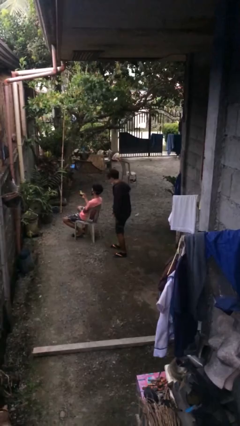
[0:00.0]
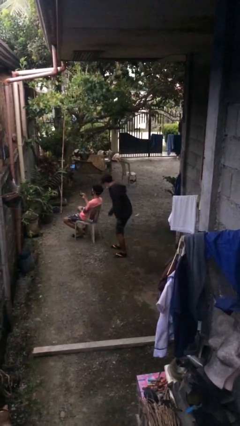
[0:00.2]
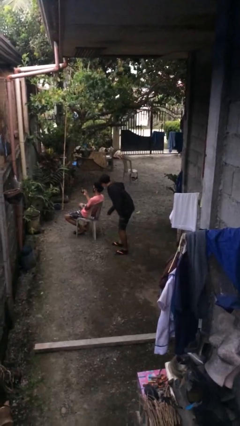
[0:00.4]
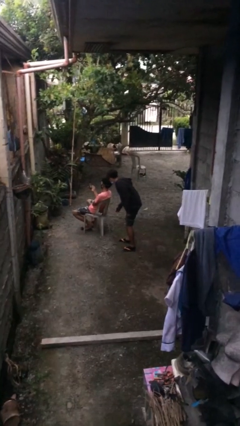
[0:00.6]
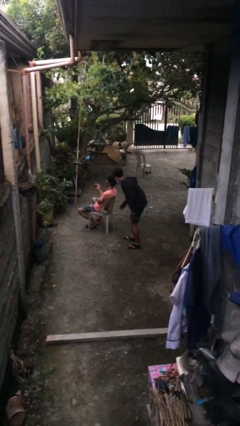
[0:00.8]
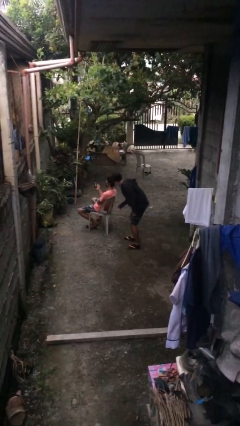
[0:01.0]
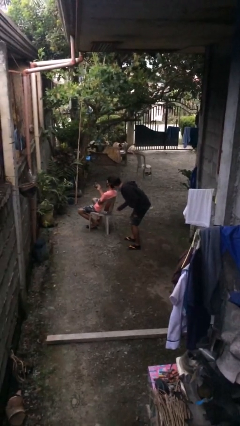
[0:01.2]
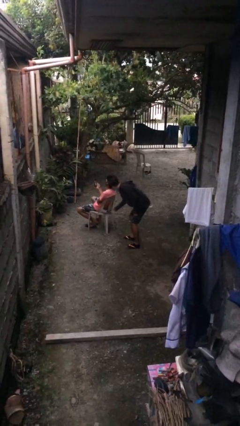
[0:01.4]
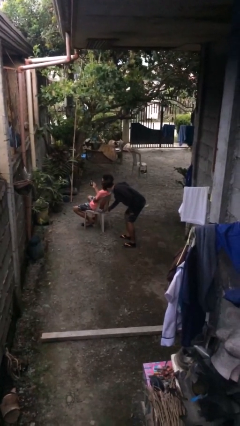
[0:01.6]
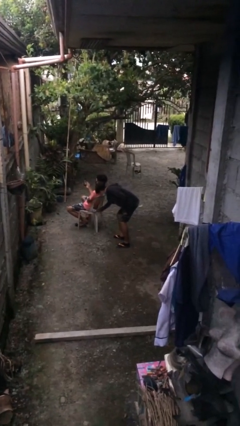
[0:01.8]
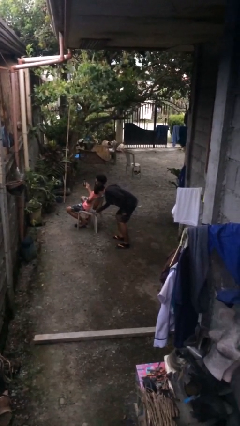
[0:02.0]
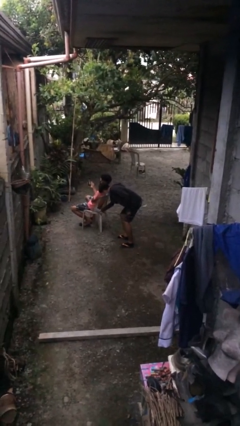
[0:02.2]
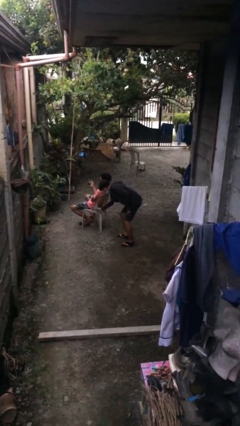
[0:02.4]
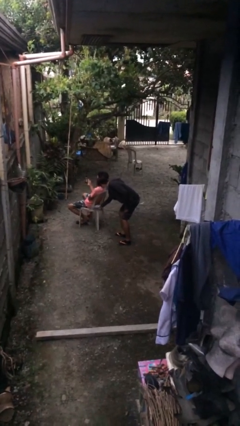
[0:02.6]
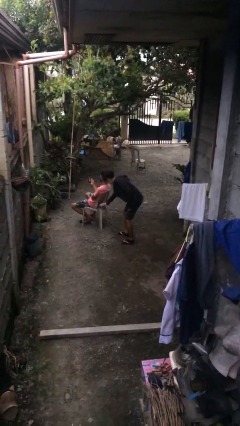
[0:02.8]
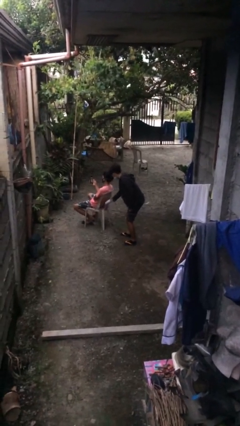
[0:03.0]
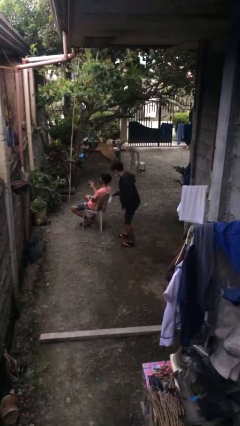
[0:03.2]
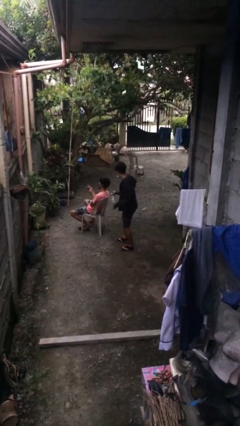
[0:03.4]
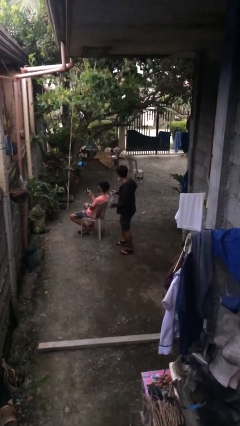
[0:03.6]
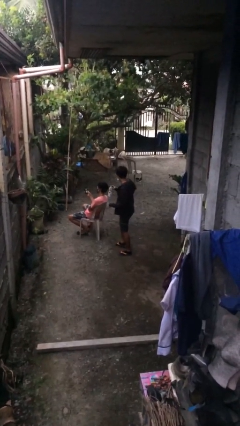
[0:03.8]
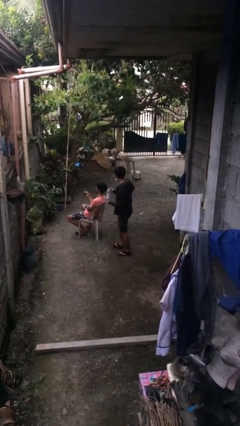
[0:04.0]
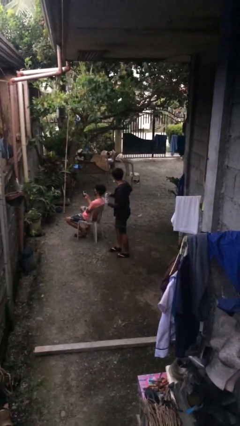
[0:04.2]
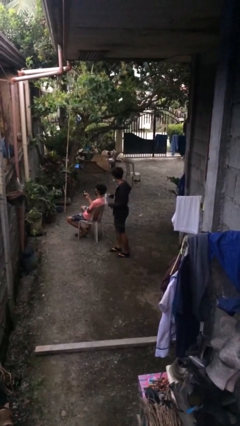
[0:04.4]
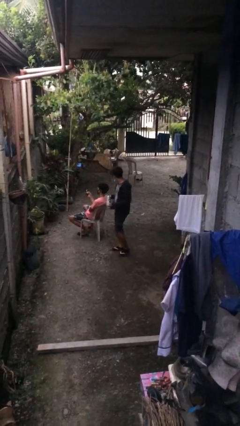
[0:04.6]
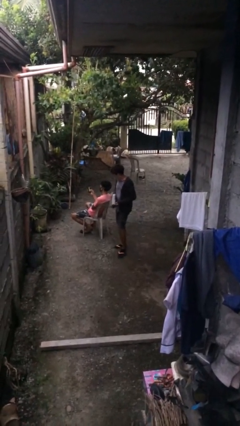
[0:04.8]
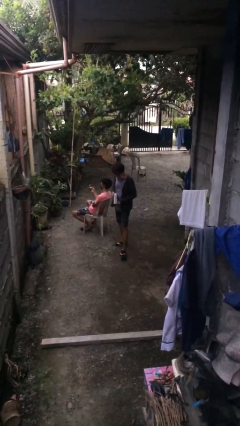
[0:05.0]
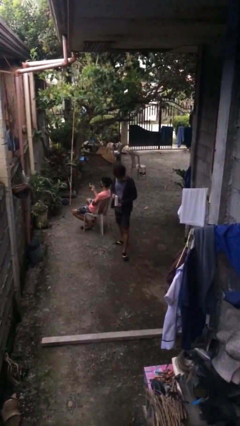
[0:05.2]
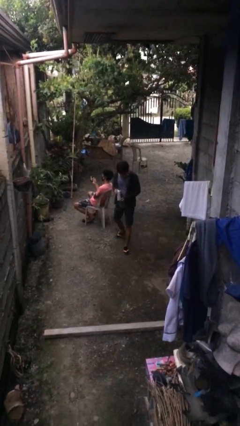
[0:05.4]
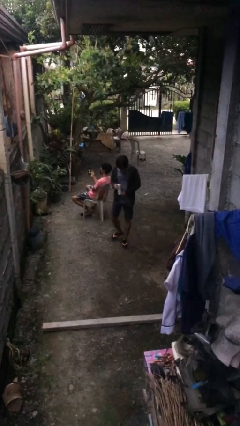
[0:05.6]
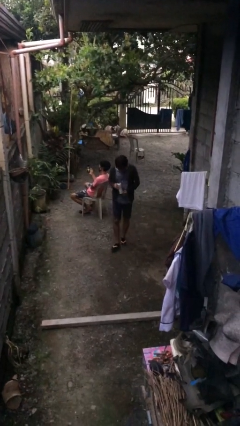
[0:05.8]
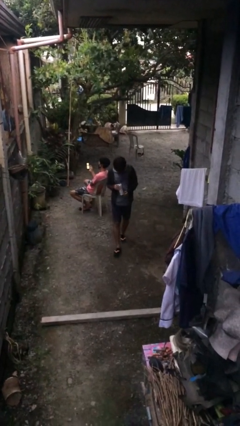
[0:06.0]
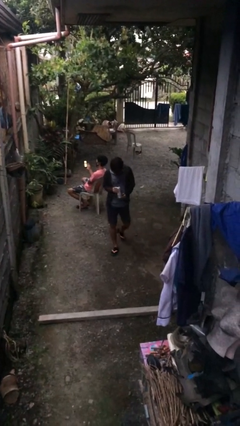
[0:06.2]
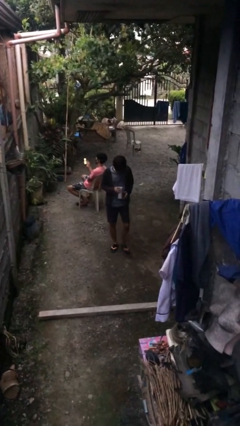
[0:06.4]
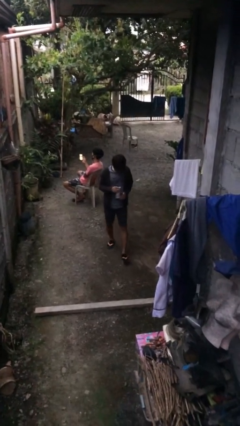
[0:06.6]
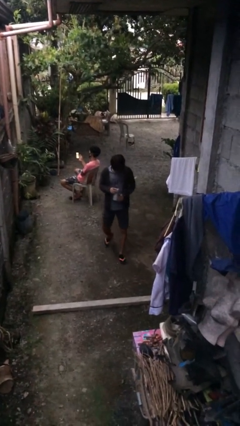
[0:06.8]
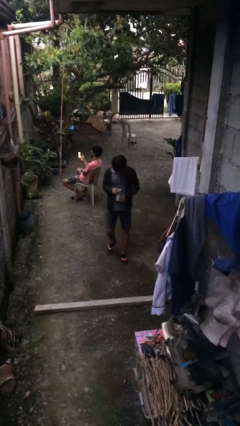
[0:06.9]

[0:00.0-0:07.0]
person steals object from person

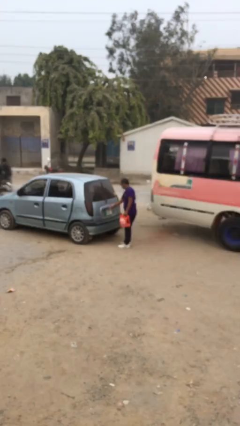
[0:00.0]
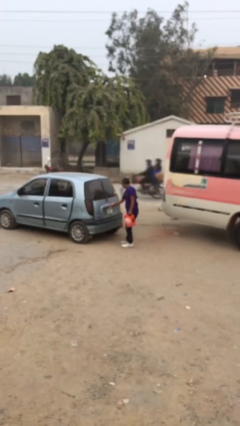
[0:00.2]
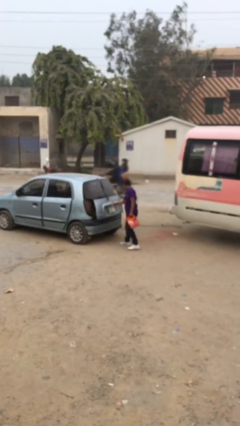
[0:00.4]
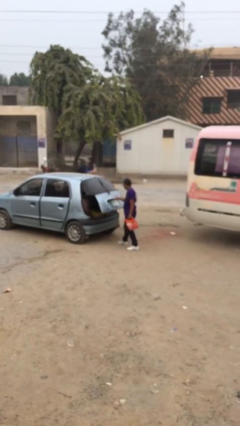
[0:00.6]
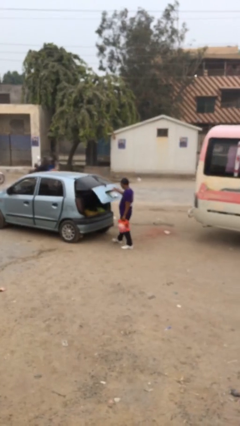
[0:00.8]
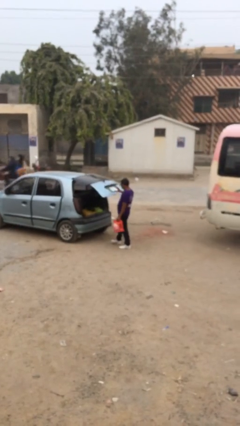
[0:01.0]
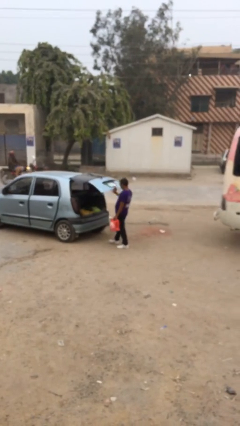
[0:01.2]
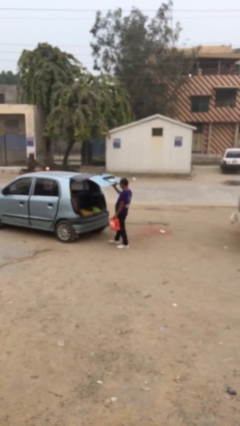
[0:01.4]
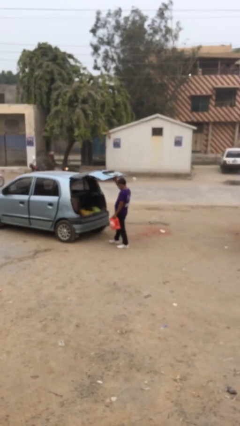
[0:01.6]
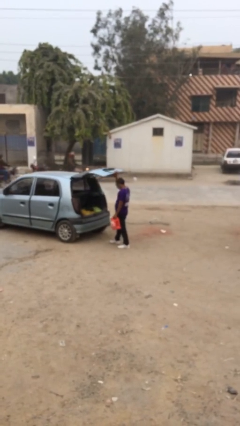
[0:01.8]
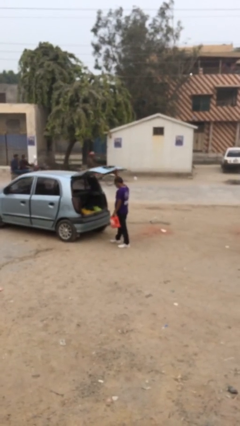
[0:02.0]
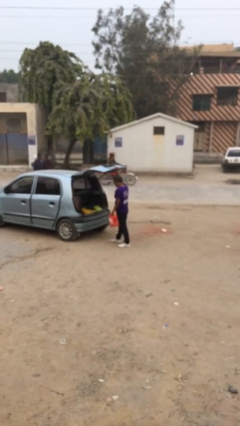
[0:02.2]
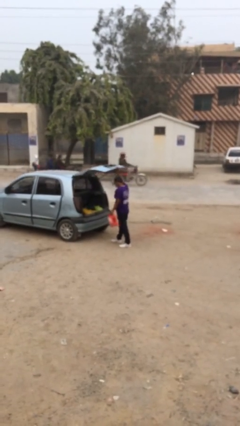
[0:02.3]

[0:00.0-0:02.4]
person opens car trunk

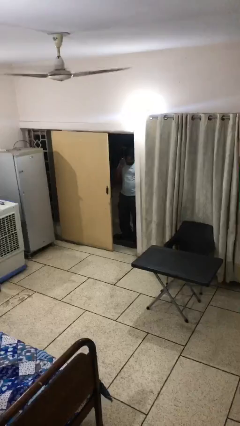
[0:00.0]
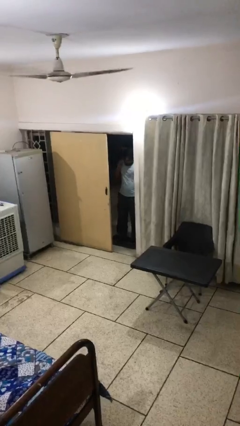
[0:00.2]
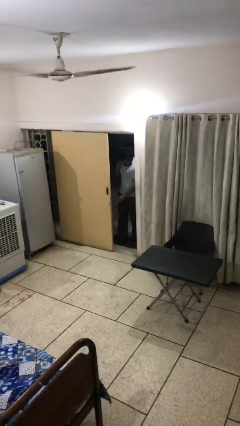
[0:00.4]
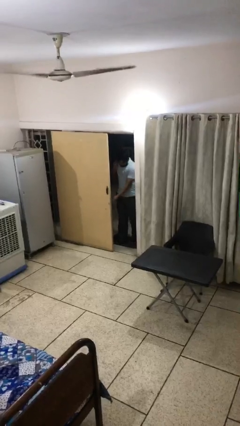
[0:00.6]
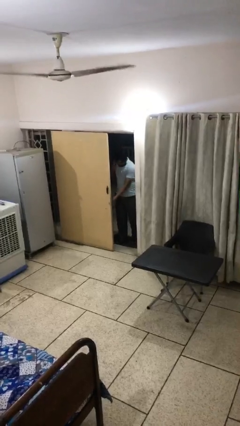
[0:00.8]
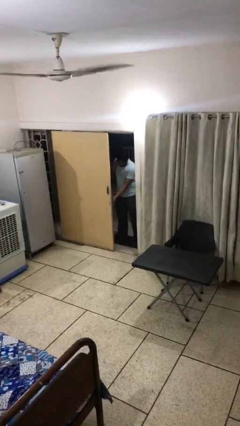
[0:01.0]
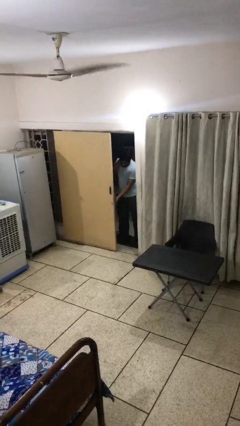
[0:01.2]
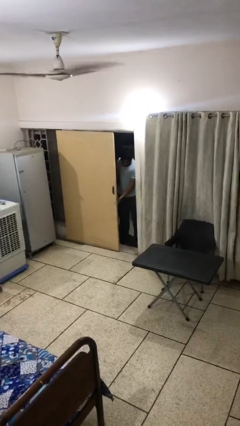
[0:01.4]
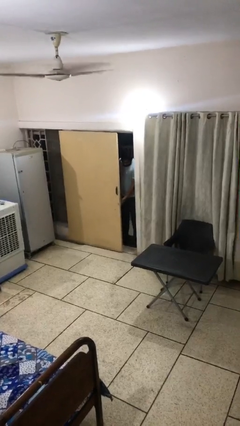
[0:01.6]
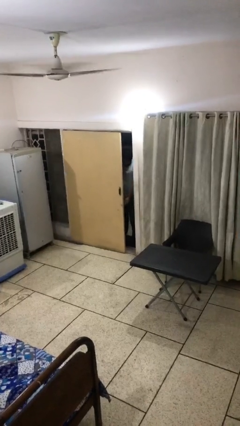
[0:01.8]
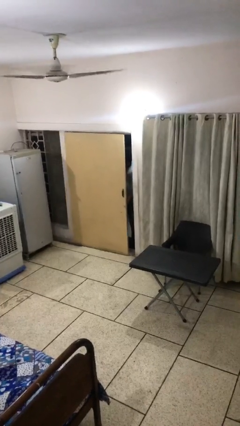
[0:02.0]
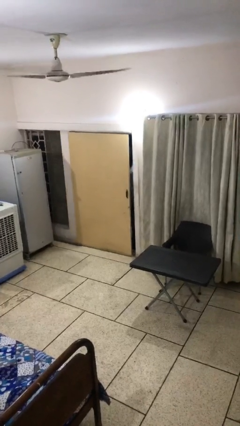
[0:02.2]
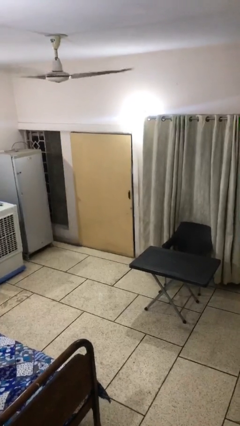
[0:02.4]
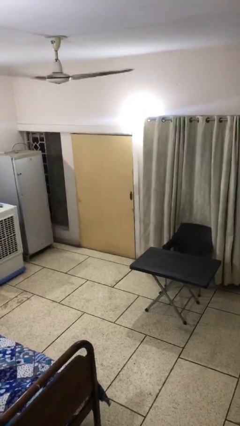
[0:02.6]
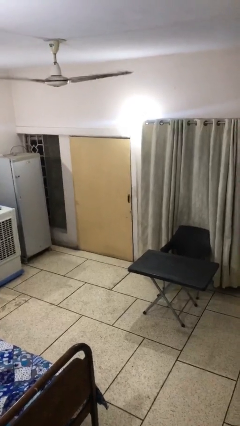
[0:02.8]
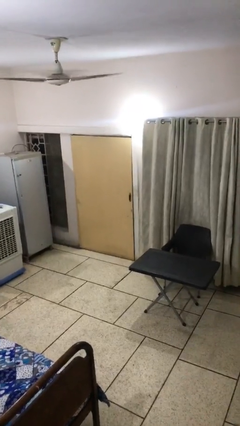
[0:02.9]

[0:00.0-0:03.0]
person closes facility door

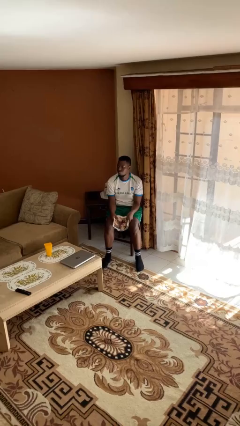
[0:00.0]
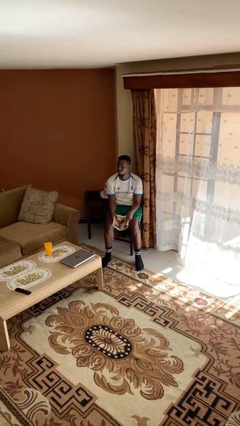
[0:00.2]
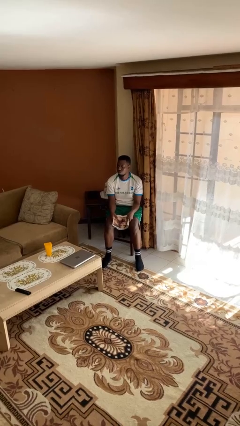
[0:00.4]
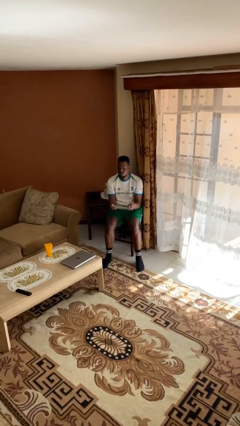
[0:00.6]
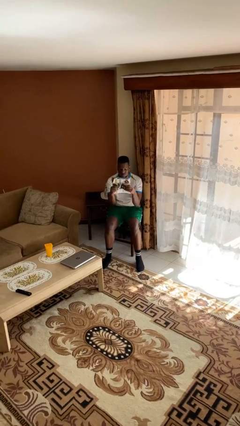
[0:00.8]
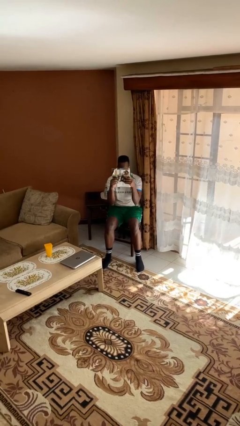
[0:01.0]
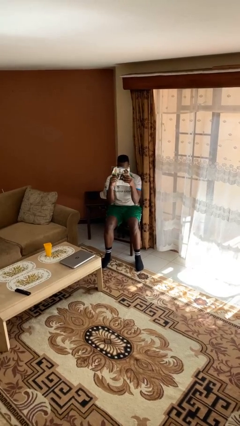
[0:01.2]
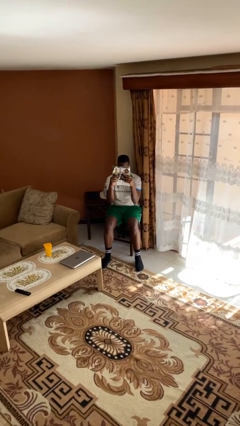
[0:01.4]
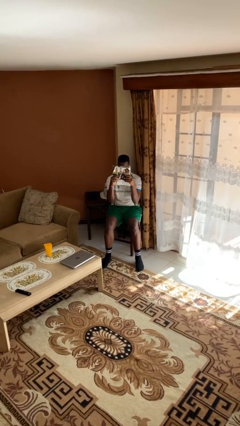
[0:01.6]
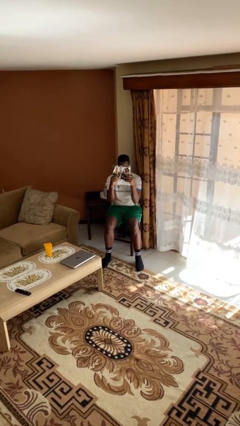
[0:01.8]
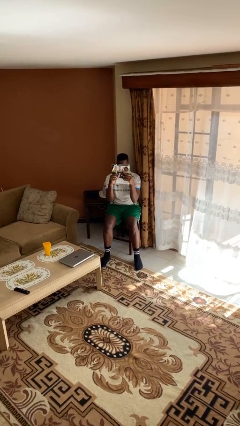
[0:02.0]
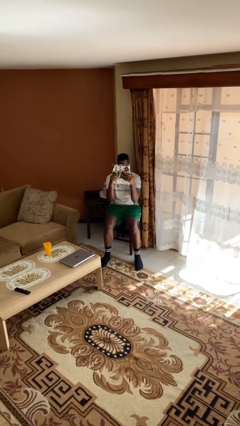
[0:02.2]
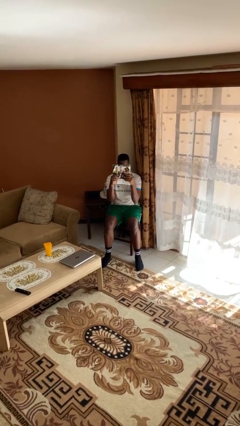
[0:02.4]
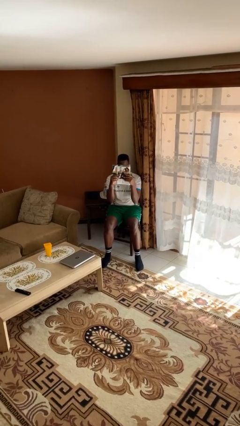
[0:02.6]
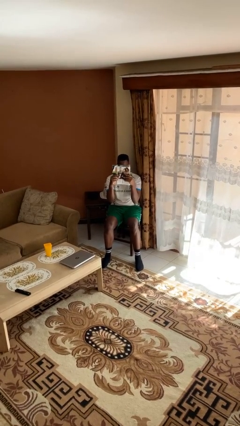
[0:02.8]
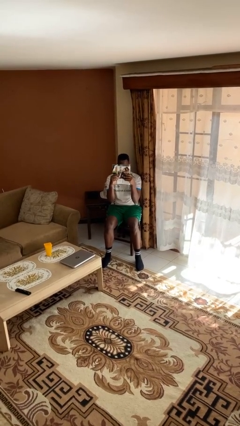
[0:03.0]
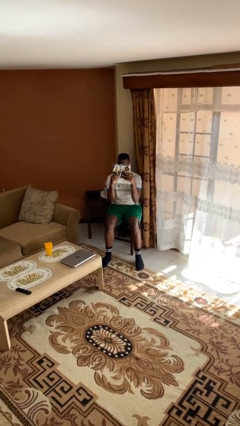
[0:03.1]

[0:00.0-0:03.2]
person reads document

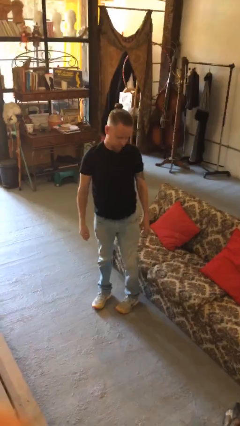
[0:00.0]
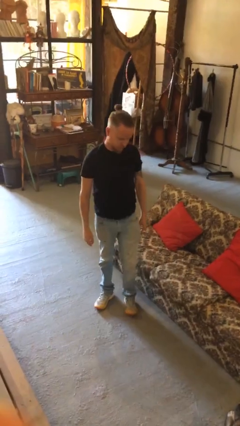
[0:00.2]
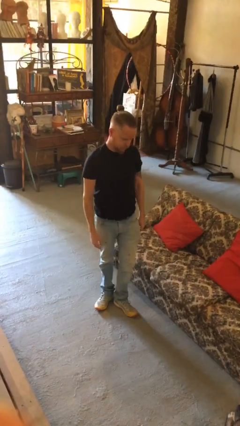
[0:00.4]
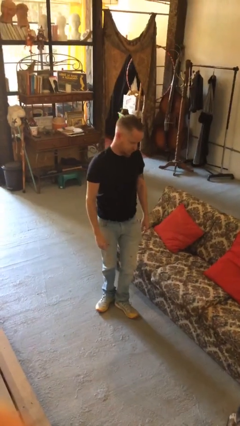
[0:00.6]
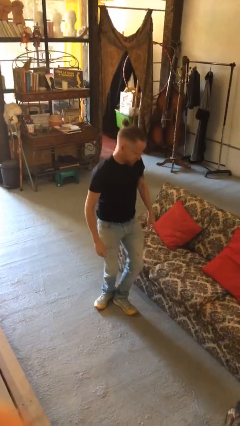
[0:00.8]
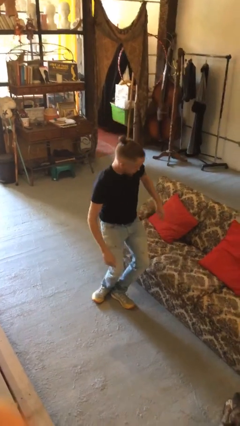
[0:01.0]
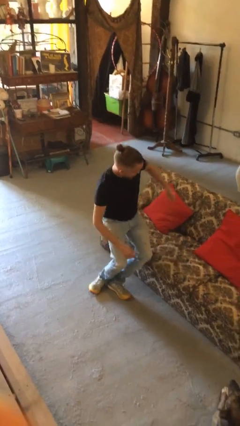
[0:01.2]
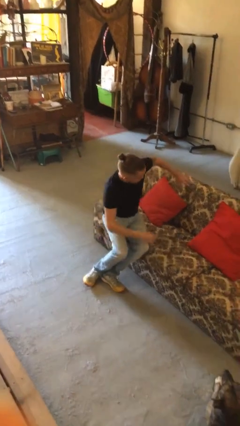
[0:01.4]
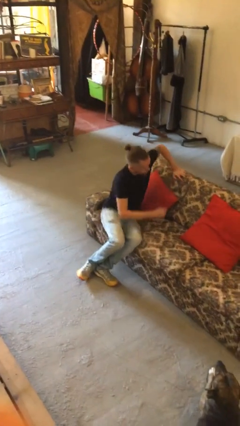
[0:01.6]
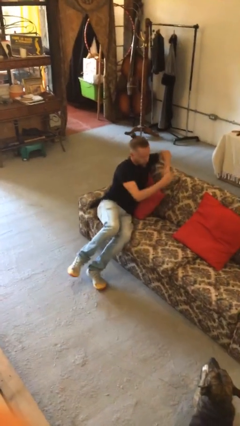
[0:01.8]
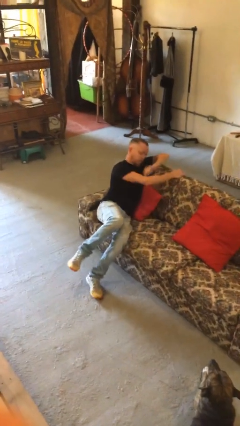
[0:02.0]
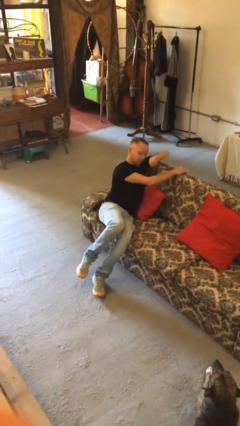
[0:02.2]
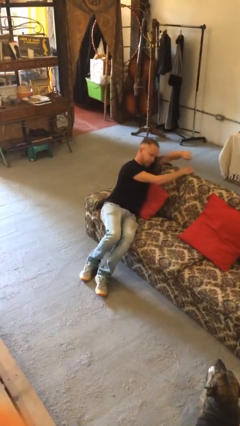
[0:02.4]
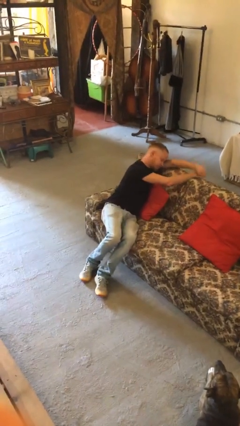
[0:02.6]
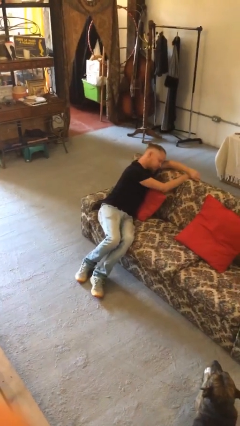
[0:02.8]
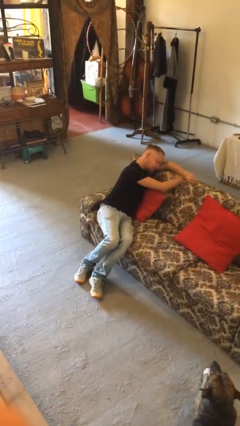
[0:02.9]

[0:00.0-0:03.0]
person lies down on couch
